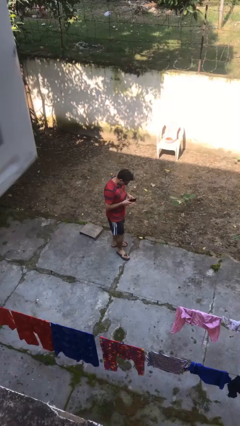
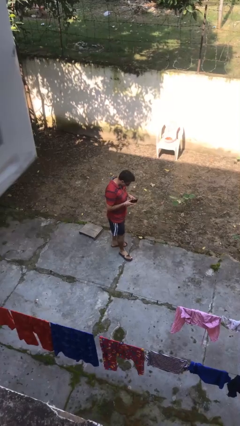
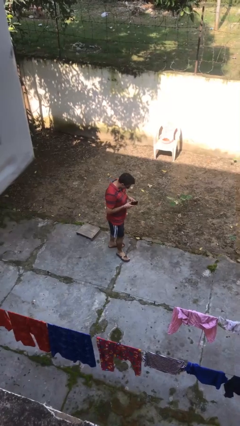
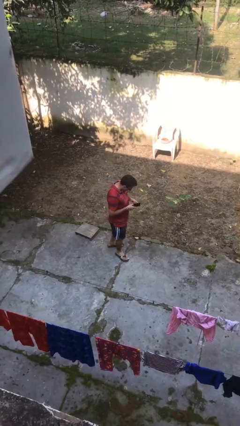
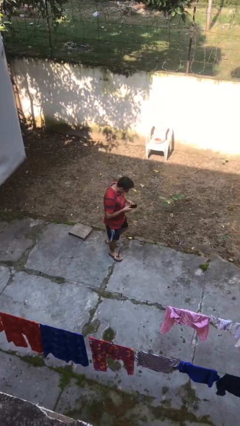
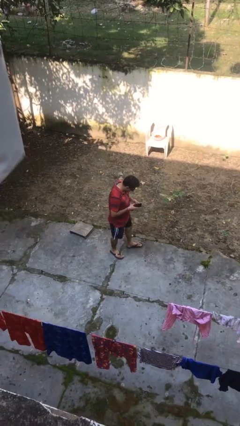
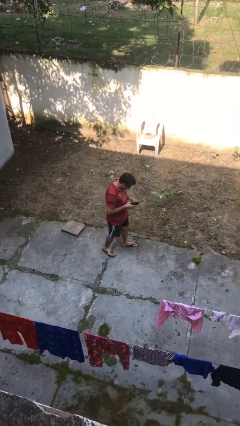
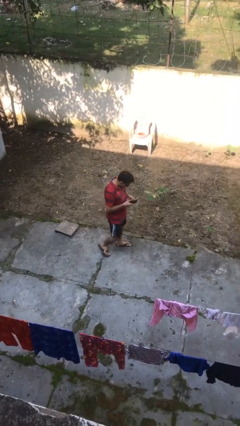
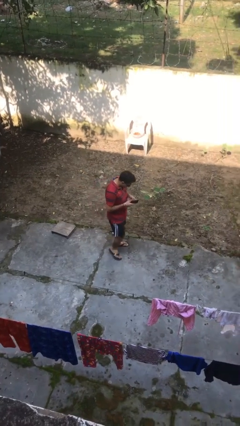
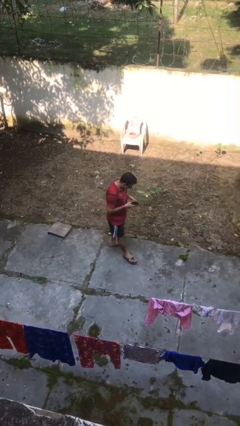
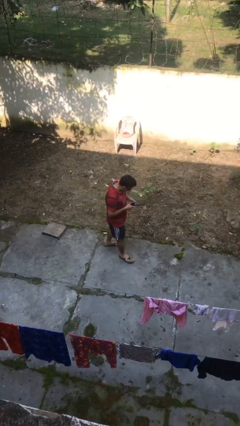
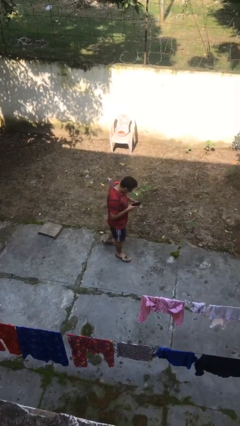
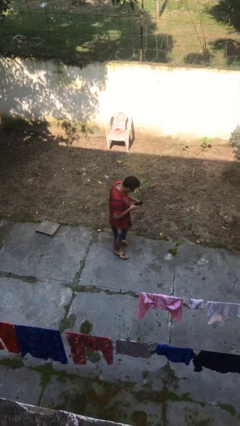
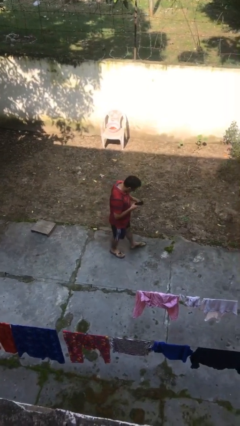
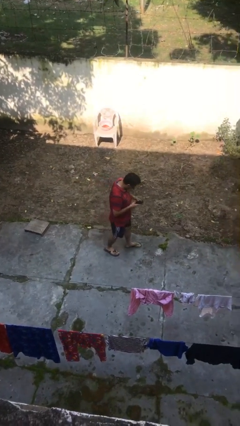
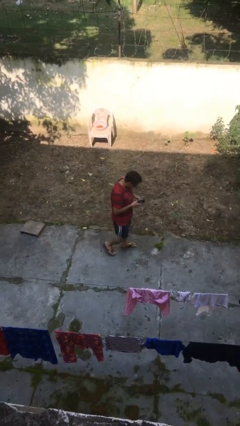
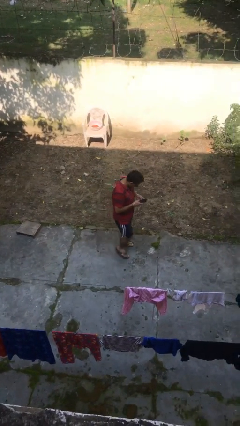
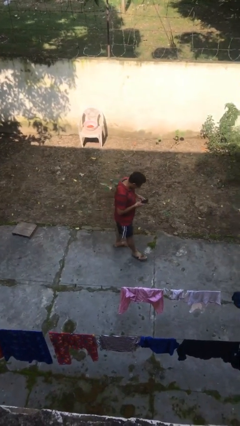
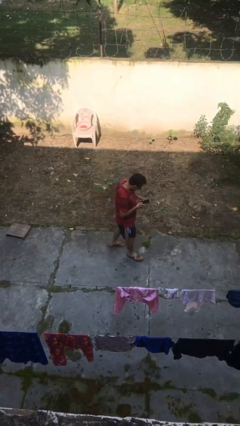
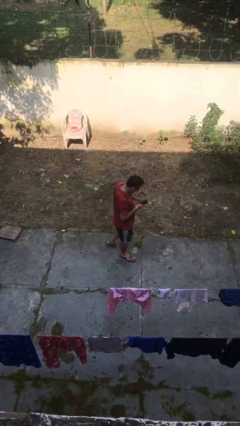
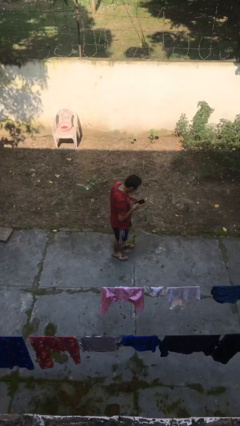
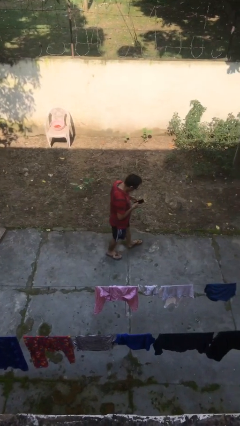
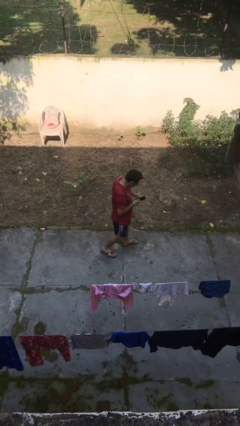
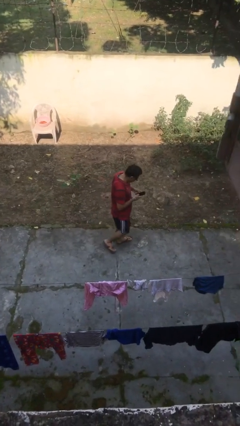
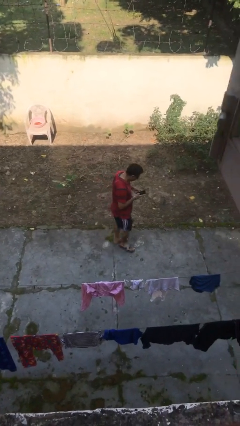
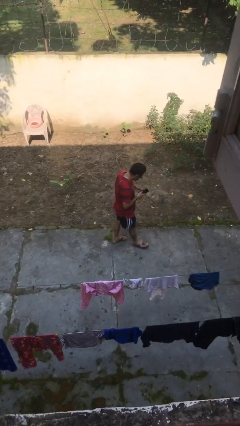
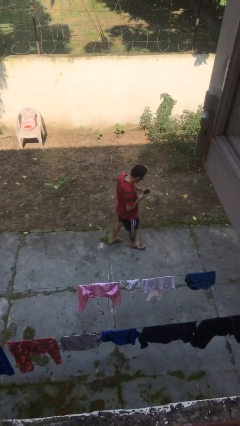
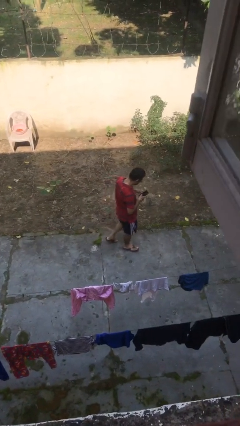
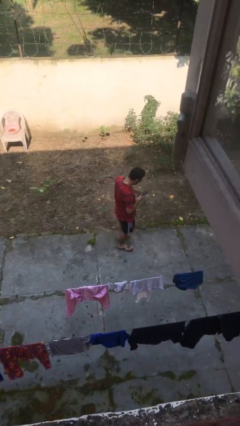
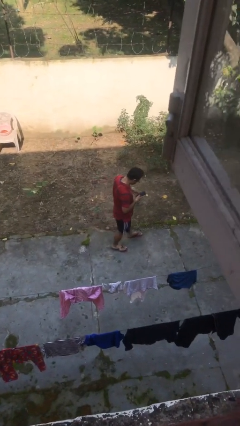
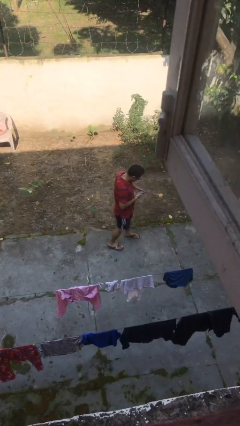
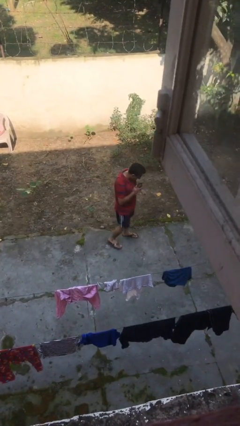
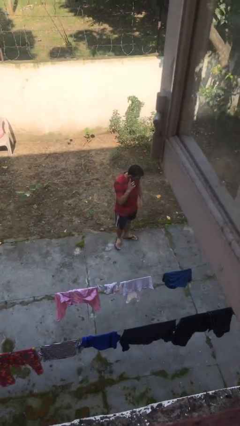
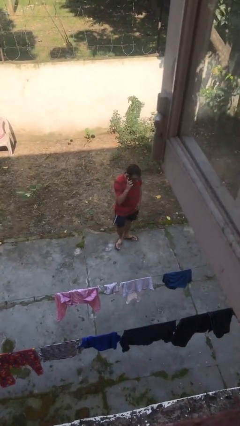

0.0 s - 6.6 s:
person texts on phone

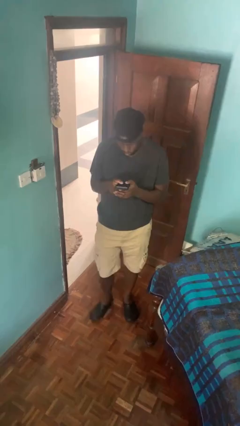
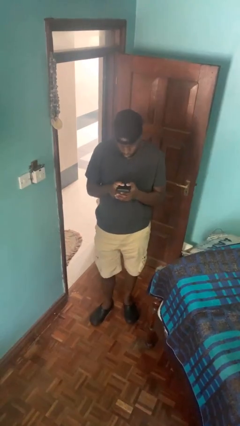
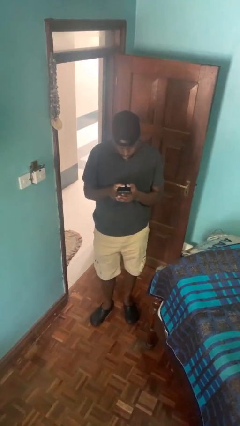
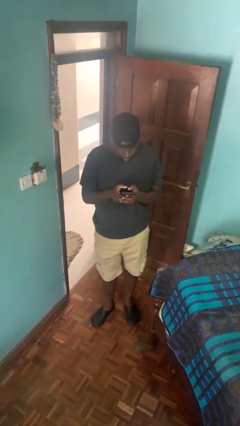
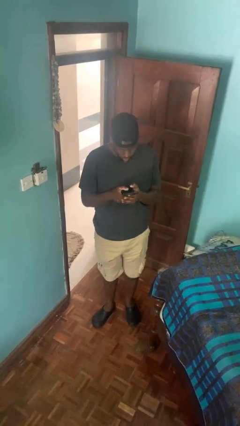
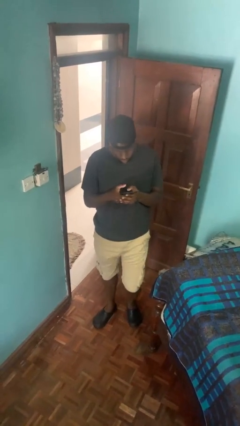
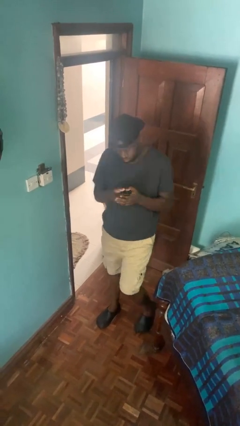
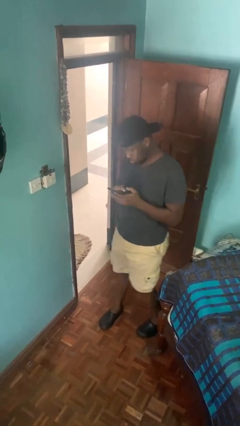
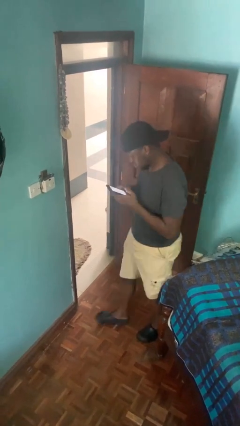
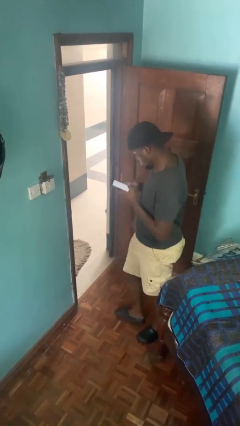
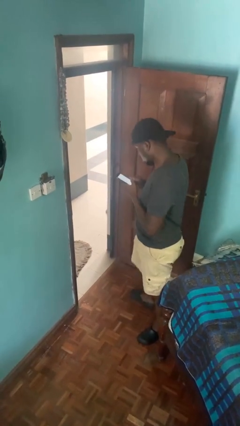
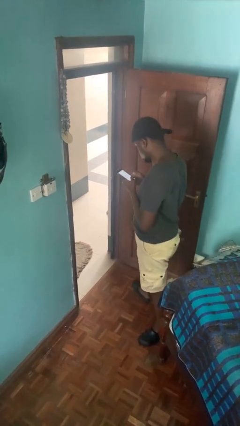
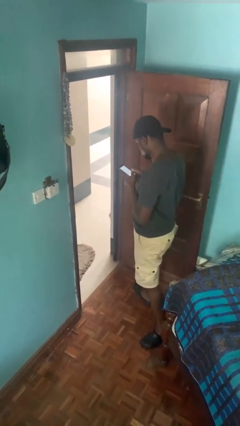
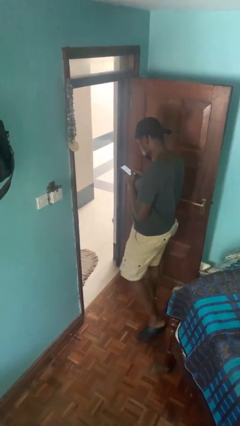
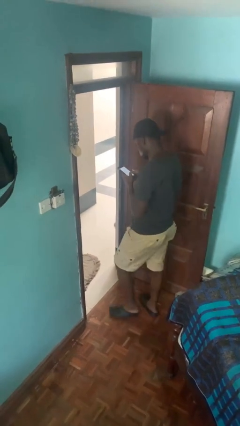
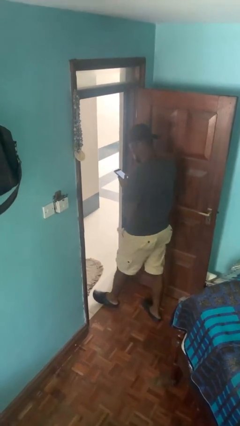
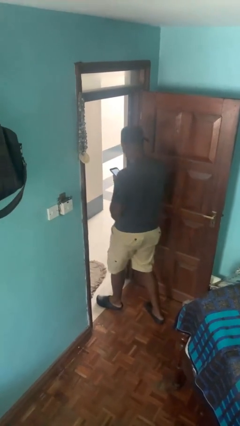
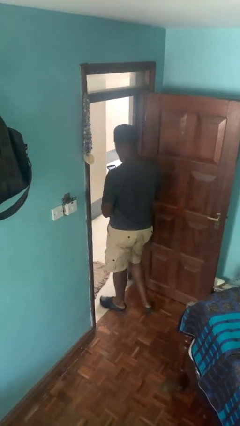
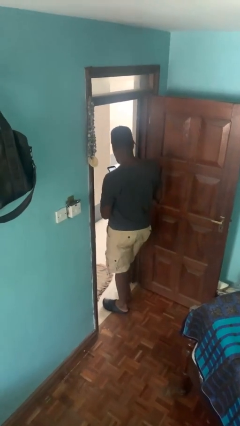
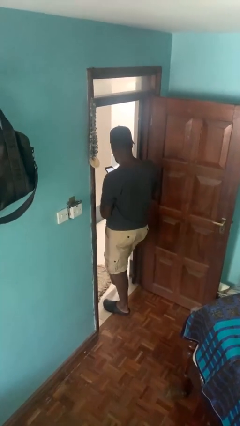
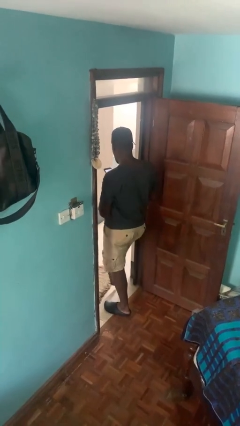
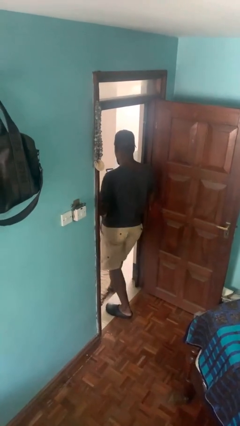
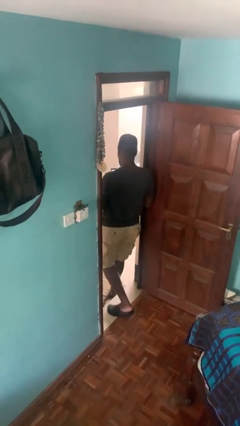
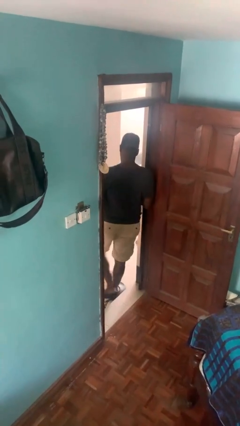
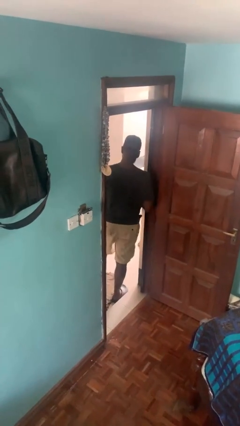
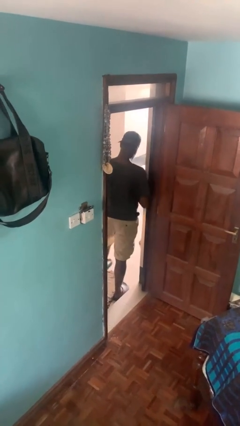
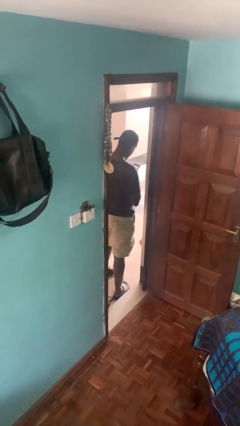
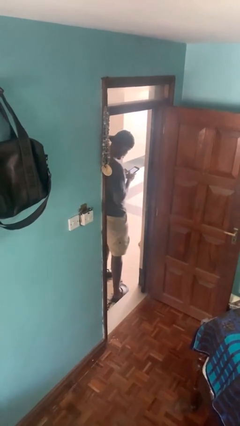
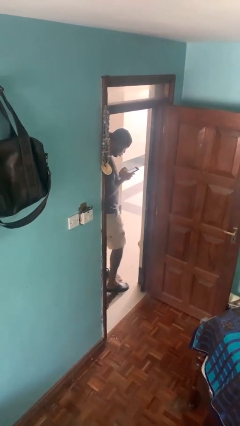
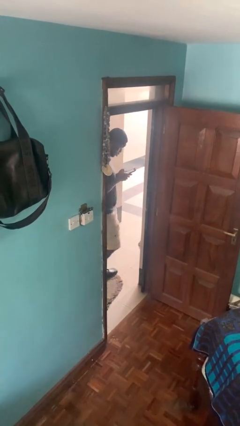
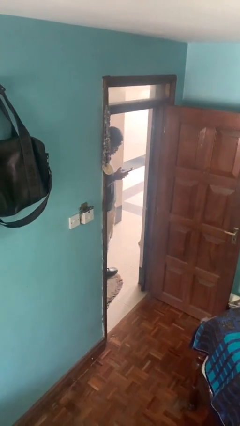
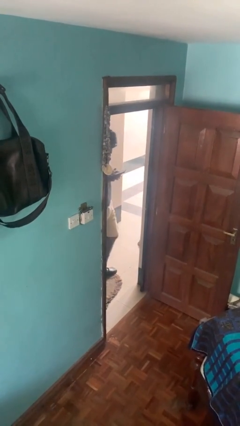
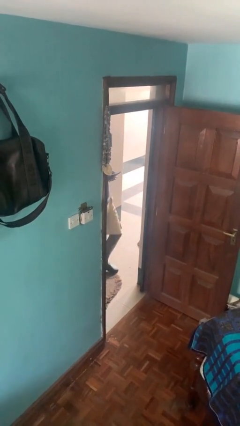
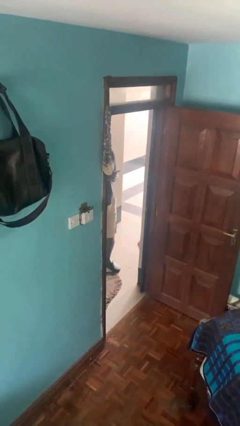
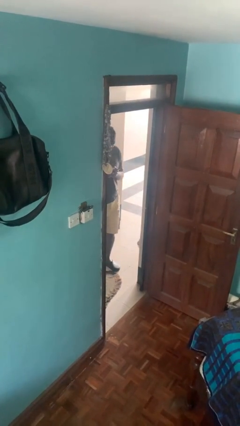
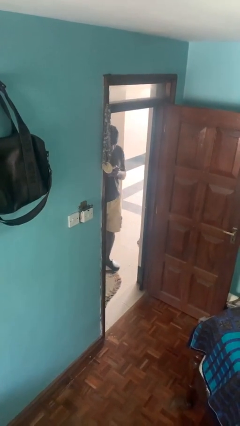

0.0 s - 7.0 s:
person exits scene through structure

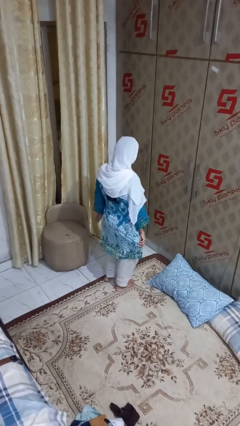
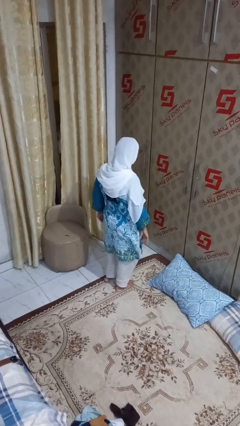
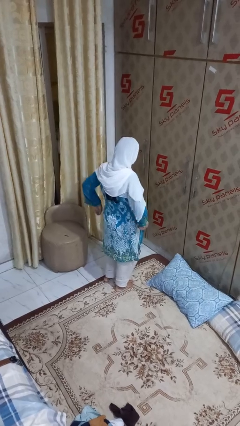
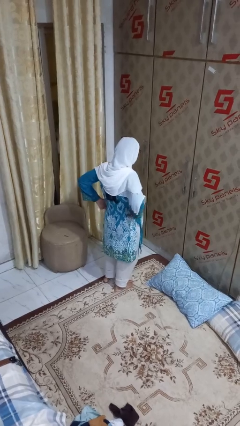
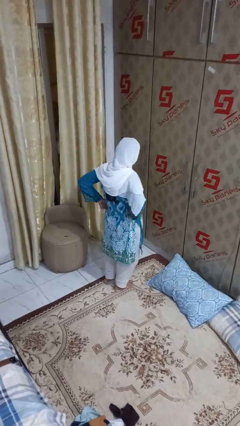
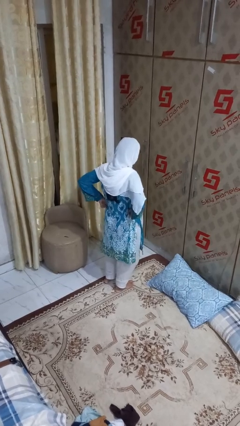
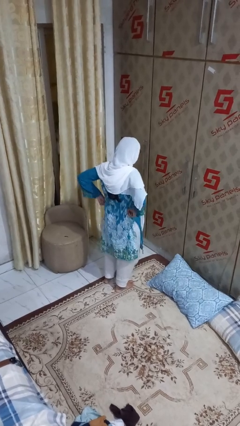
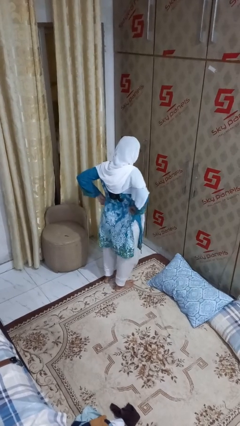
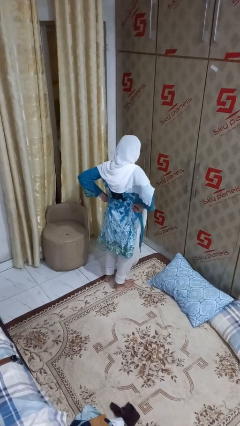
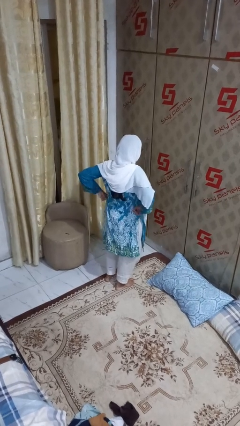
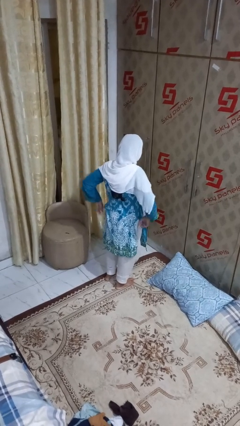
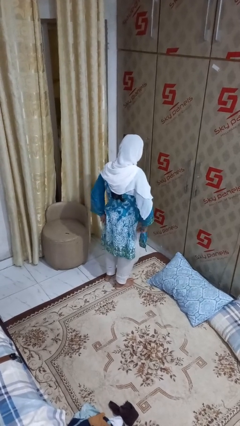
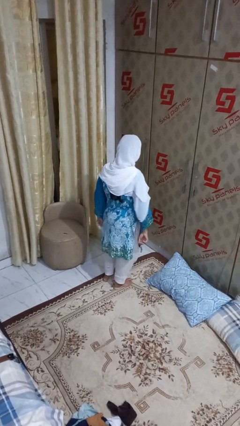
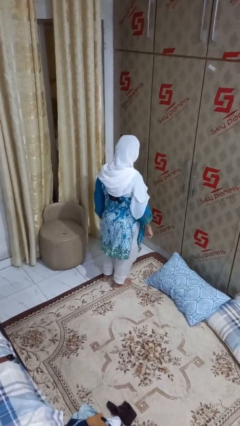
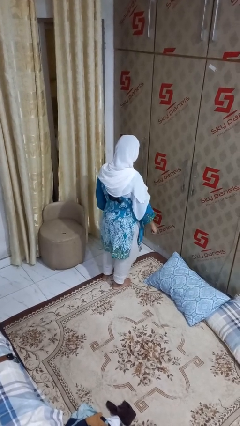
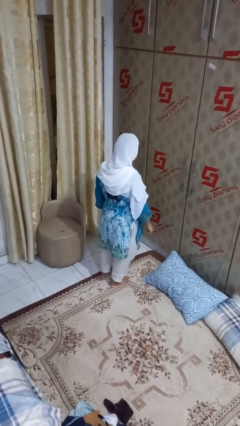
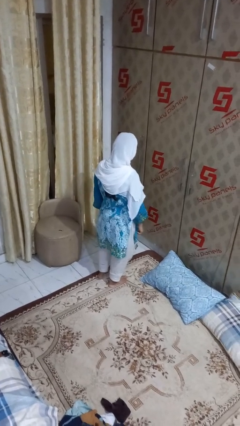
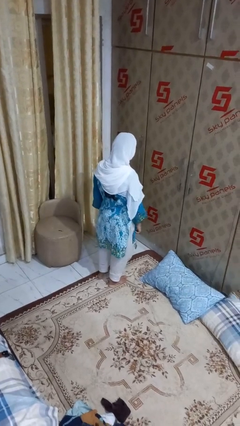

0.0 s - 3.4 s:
person hikes up pants

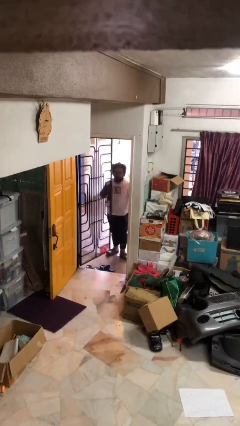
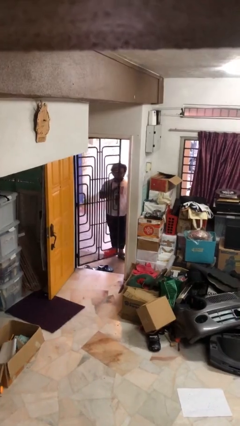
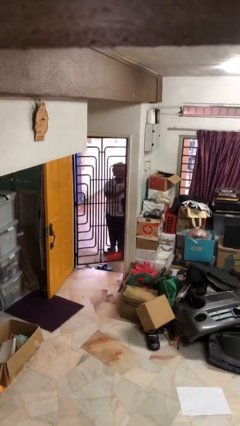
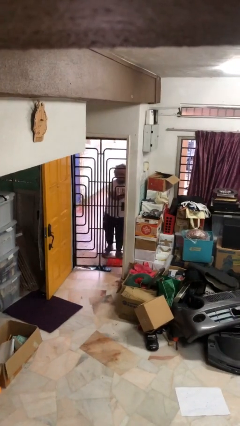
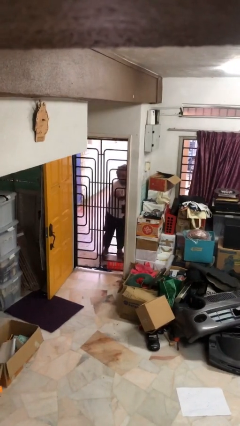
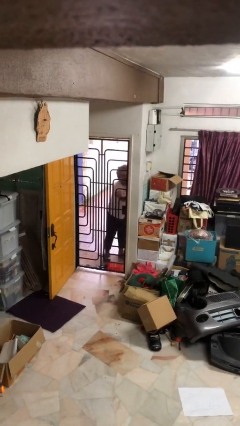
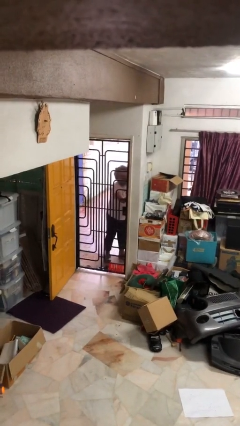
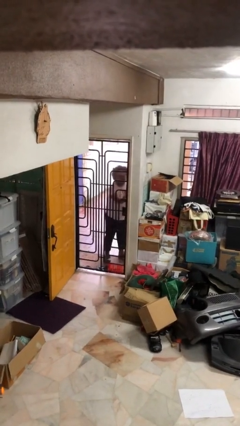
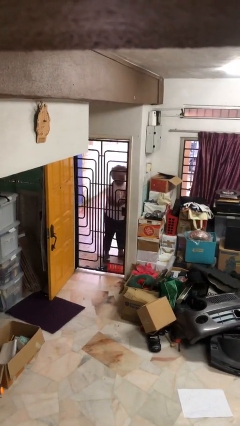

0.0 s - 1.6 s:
person closes facility door
